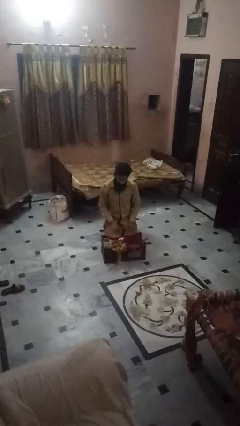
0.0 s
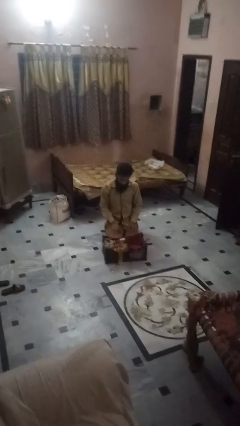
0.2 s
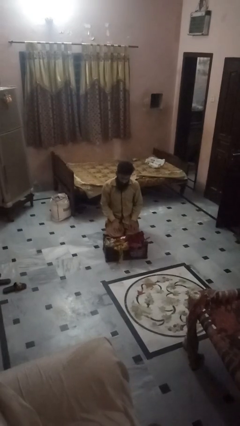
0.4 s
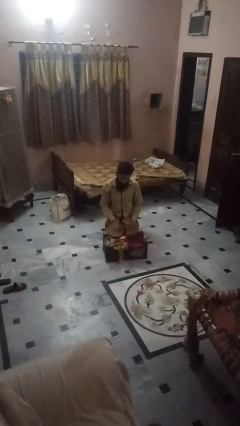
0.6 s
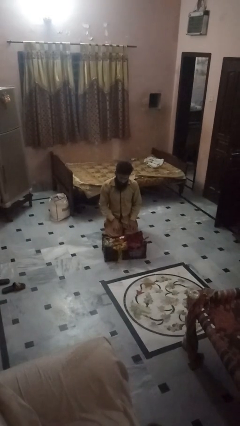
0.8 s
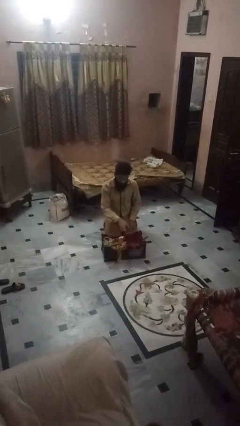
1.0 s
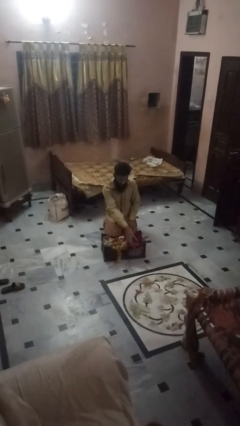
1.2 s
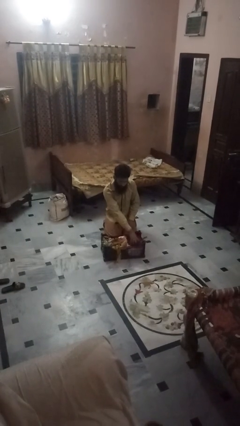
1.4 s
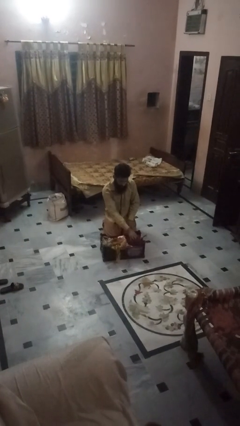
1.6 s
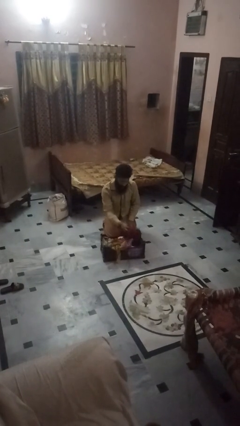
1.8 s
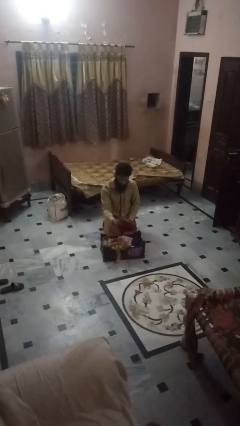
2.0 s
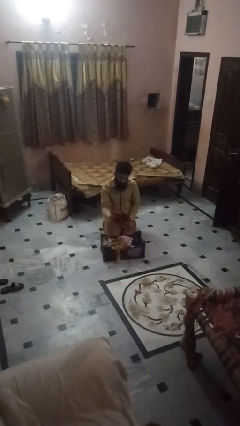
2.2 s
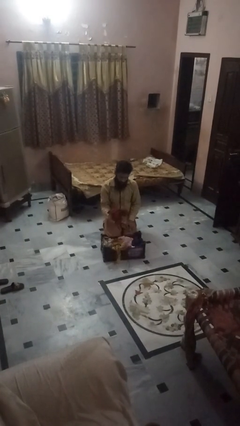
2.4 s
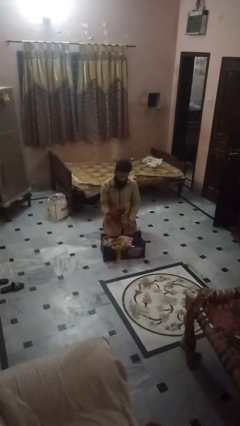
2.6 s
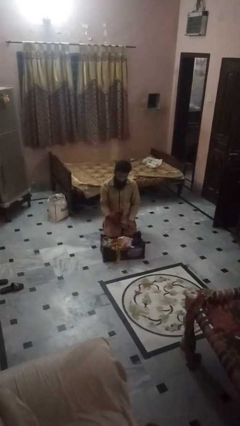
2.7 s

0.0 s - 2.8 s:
person puts object into basket

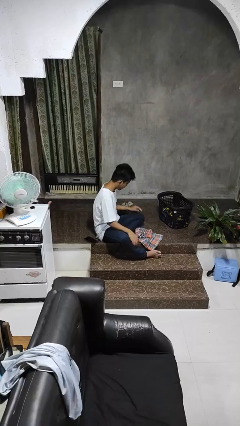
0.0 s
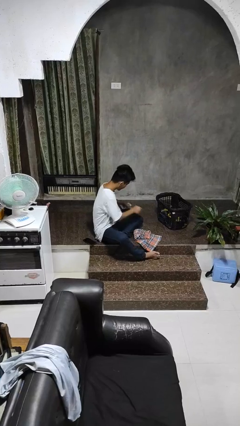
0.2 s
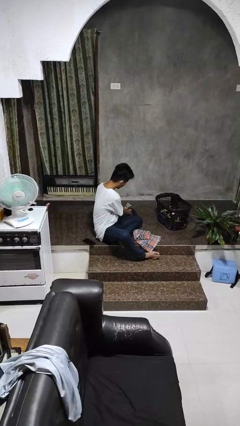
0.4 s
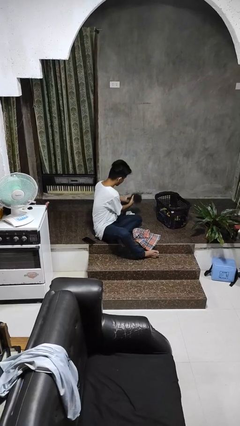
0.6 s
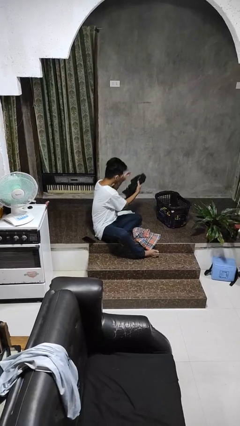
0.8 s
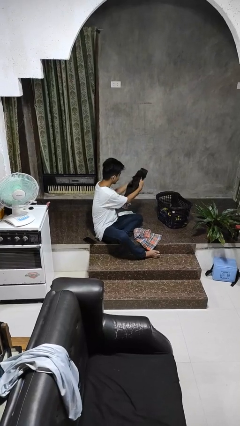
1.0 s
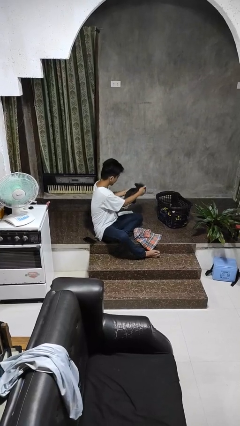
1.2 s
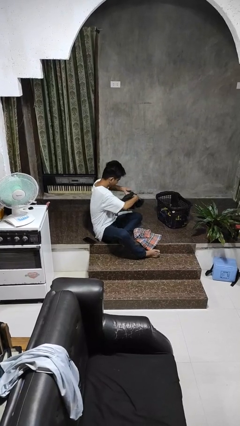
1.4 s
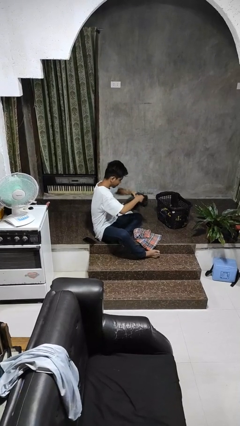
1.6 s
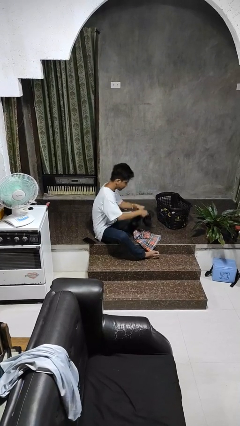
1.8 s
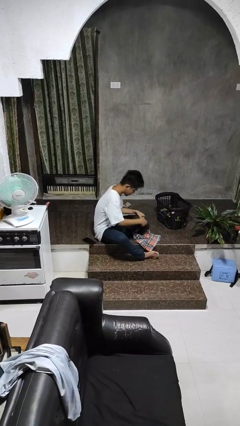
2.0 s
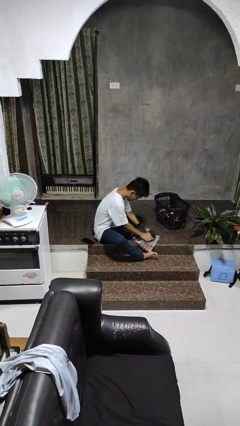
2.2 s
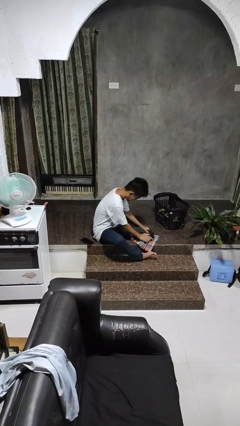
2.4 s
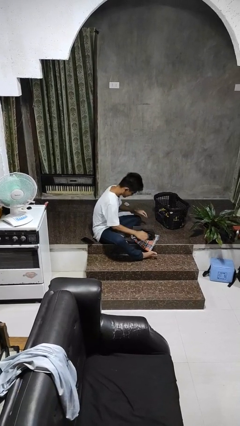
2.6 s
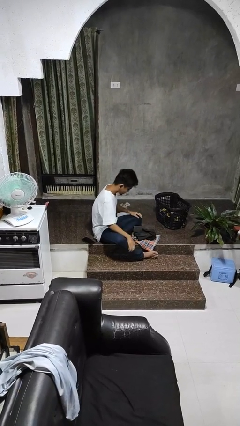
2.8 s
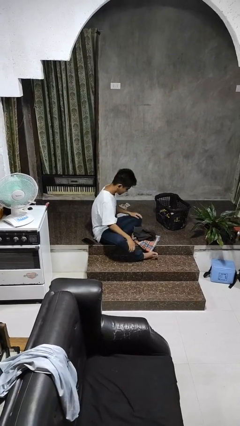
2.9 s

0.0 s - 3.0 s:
person folds pants

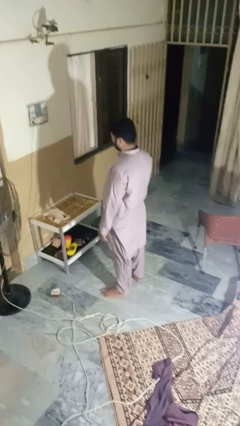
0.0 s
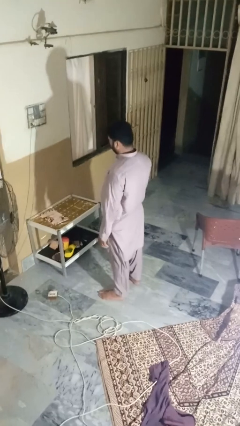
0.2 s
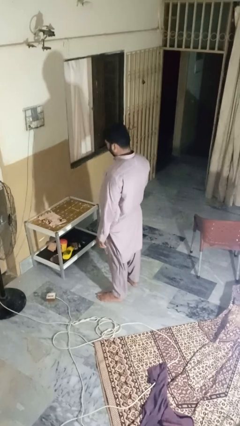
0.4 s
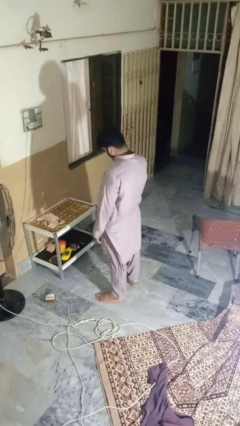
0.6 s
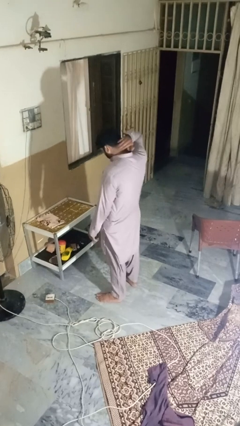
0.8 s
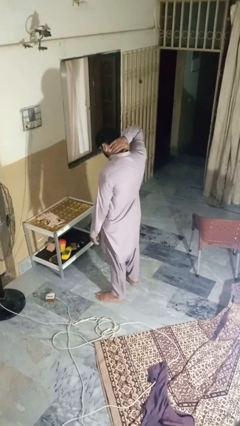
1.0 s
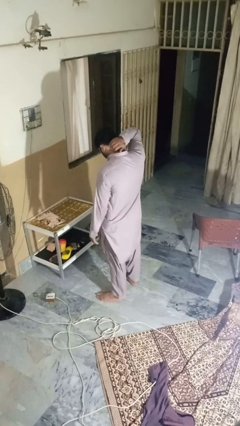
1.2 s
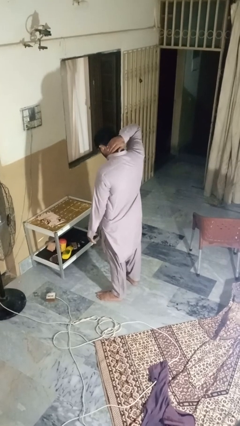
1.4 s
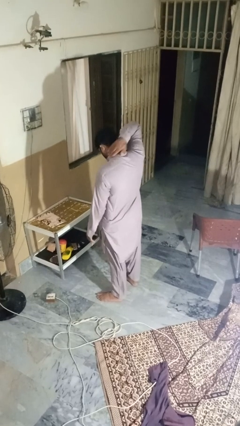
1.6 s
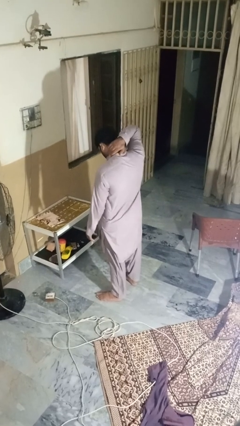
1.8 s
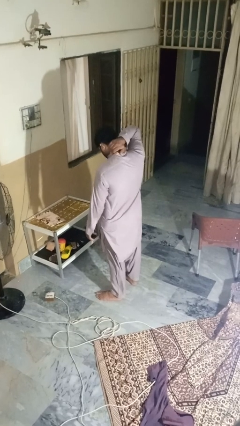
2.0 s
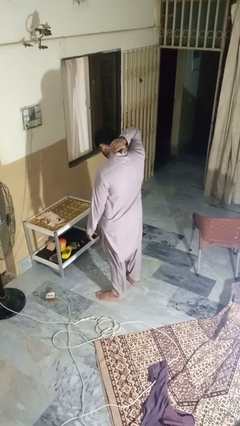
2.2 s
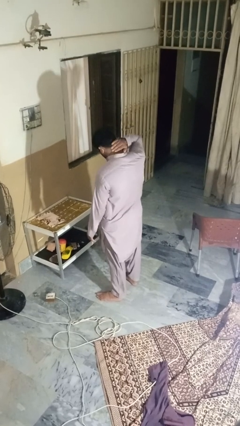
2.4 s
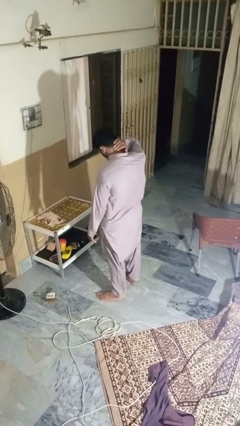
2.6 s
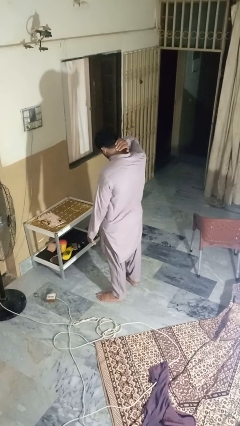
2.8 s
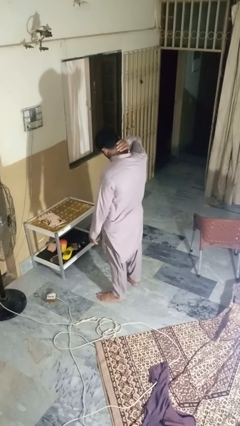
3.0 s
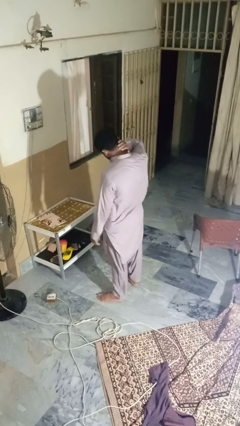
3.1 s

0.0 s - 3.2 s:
person rubs neck

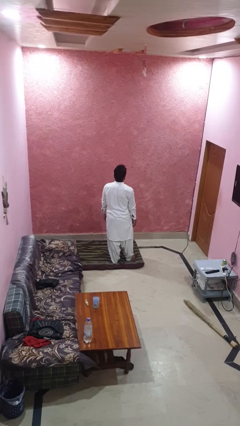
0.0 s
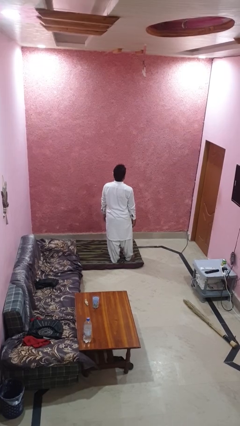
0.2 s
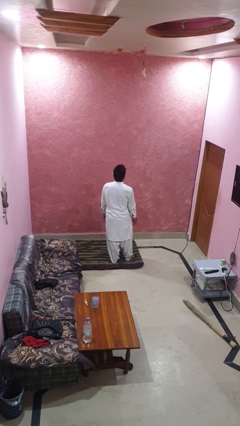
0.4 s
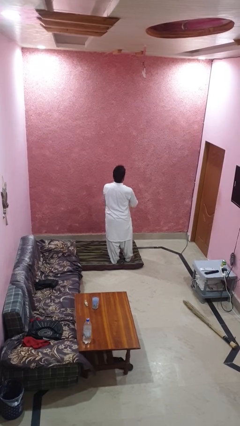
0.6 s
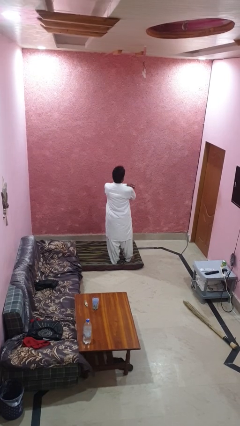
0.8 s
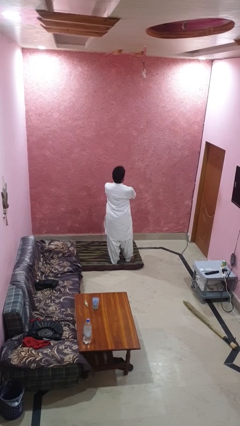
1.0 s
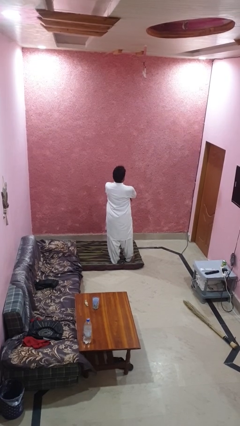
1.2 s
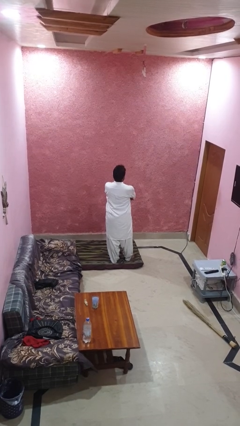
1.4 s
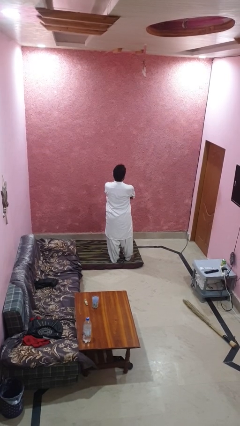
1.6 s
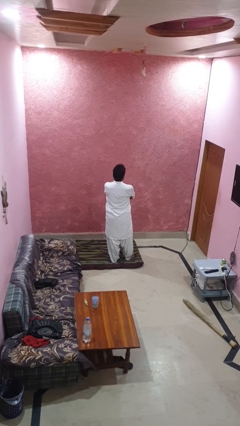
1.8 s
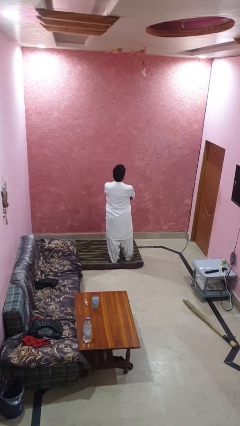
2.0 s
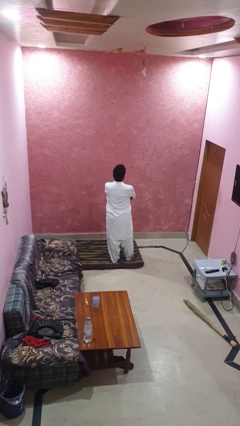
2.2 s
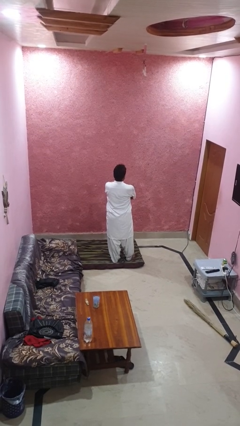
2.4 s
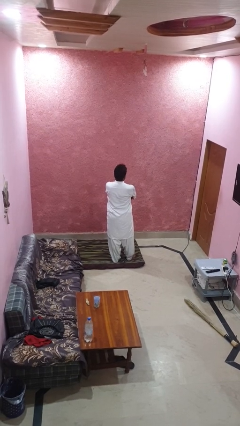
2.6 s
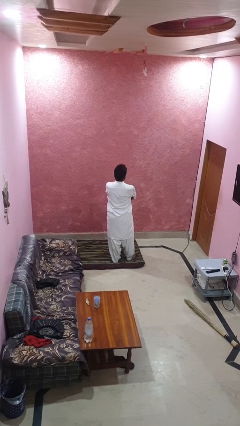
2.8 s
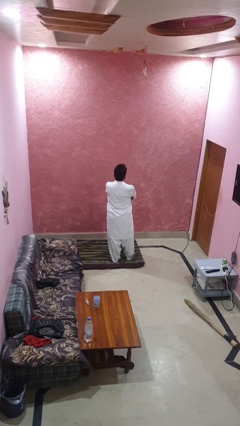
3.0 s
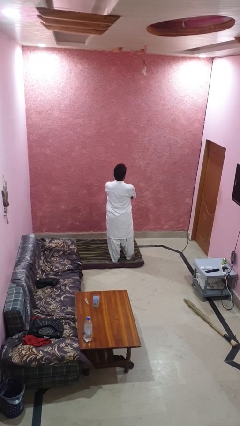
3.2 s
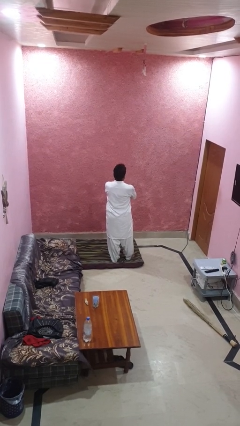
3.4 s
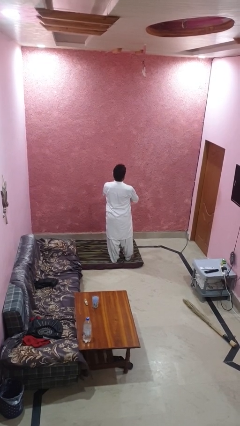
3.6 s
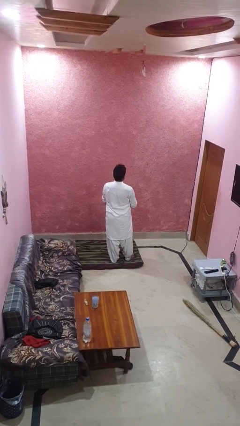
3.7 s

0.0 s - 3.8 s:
person crosses arms

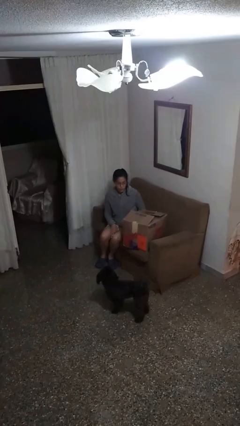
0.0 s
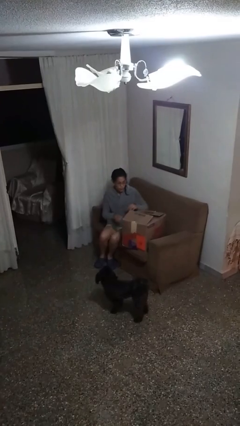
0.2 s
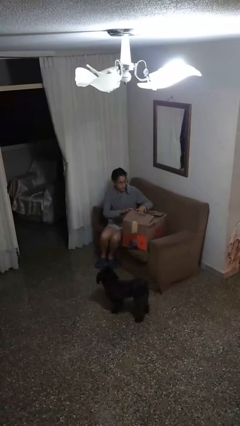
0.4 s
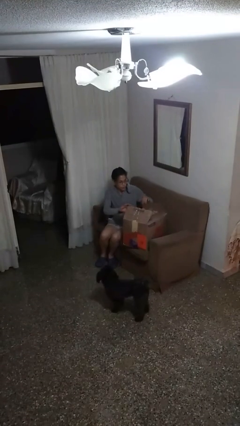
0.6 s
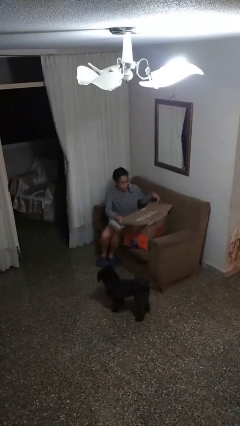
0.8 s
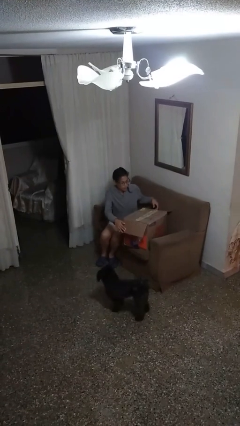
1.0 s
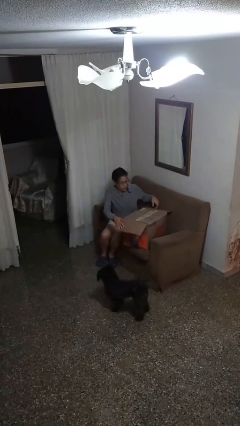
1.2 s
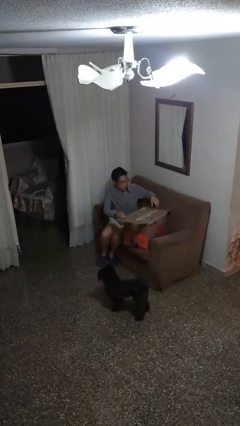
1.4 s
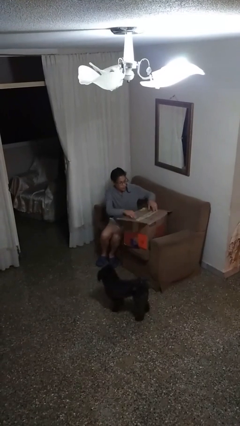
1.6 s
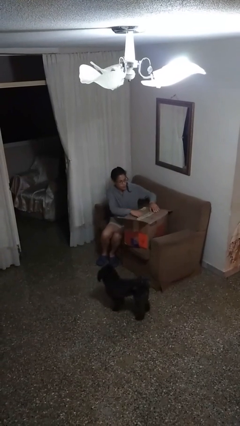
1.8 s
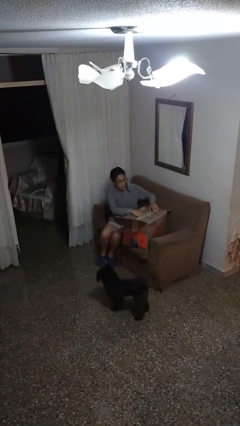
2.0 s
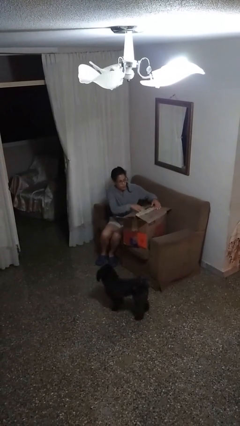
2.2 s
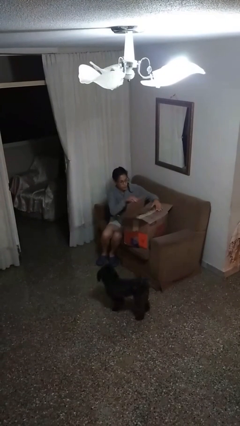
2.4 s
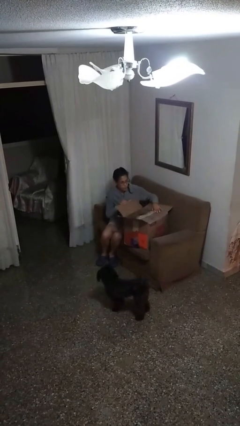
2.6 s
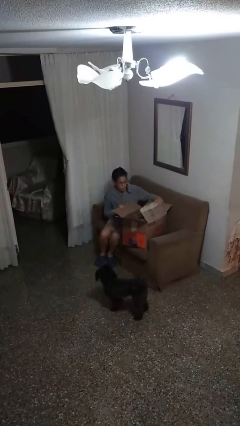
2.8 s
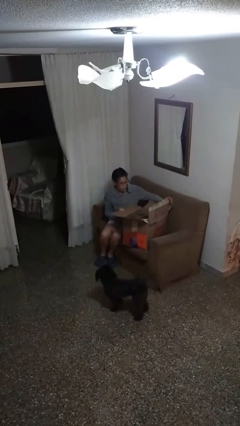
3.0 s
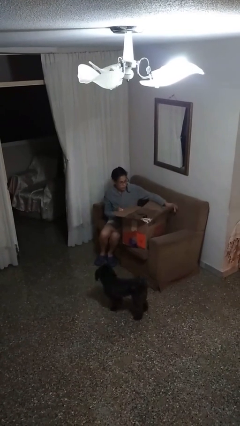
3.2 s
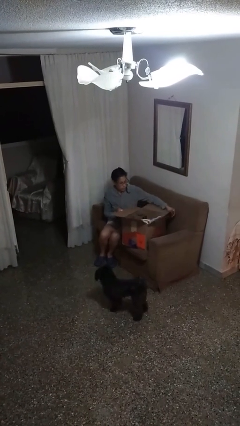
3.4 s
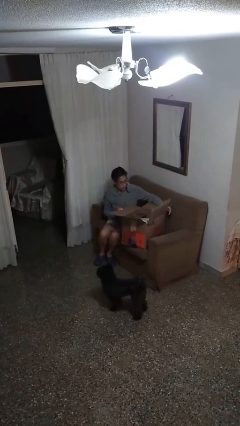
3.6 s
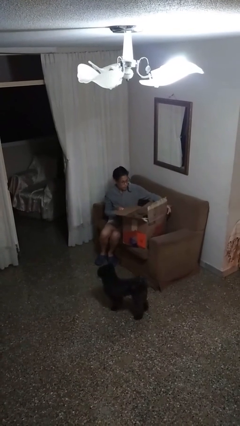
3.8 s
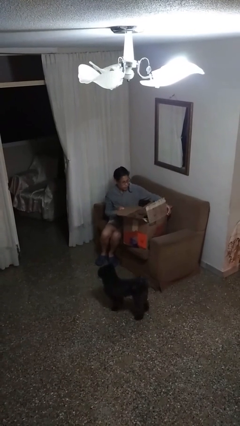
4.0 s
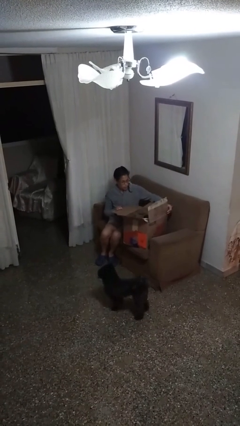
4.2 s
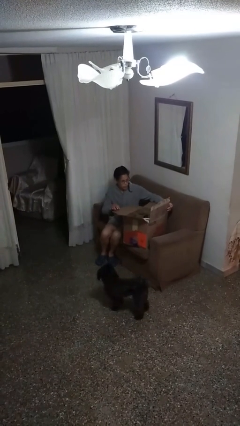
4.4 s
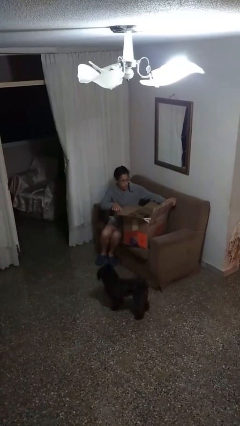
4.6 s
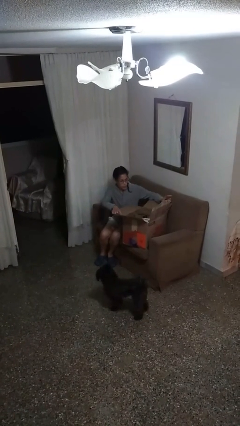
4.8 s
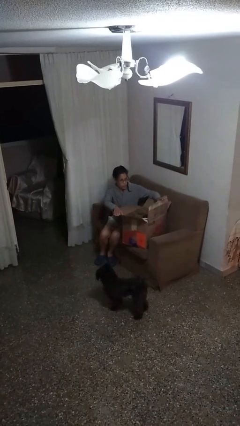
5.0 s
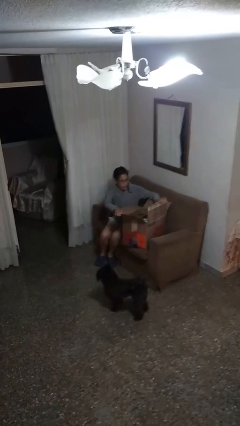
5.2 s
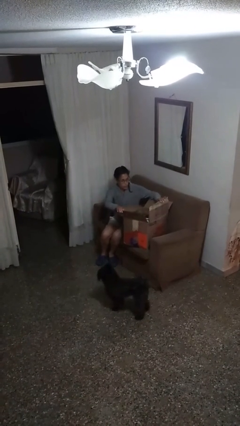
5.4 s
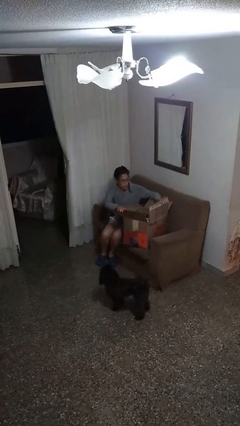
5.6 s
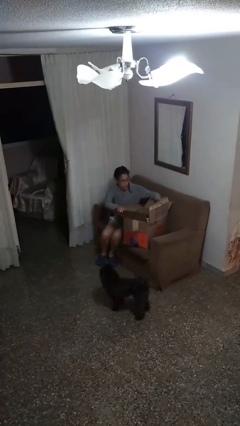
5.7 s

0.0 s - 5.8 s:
person opens box
